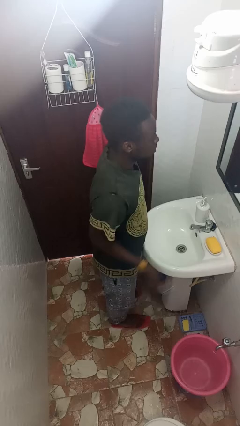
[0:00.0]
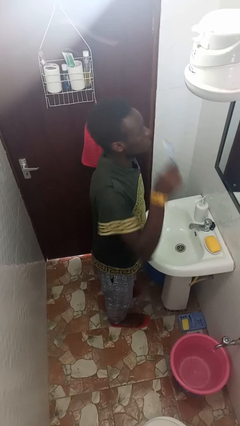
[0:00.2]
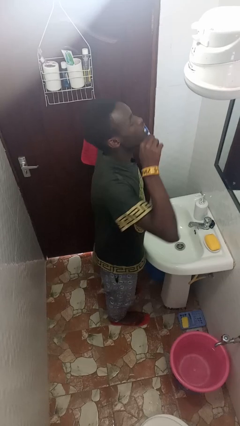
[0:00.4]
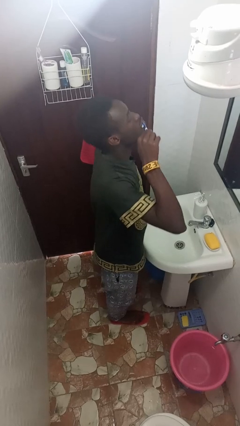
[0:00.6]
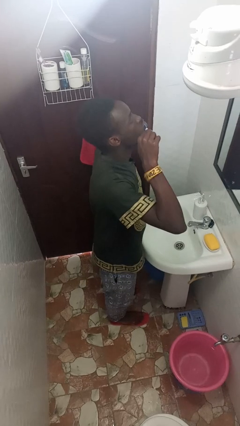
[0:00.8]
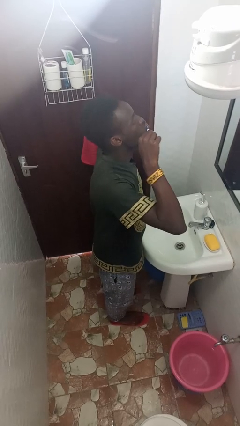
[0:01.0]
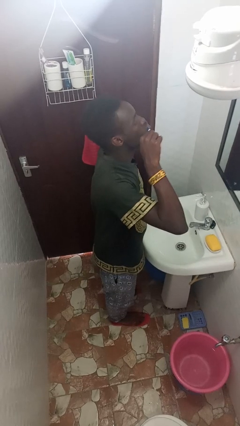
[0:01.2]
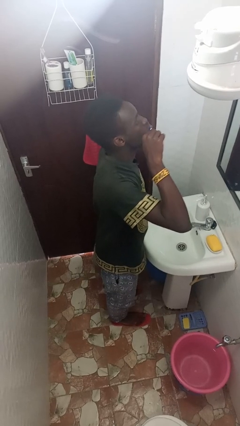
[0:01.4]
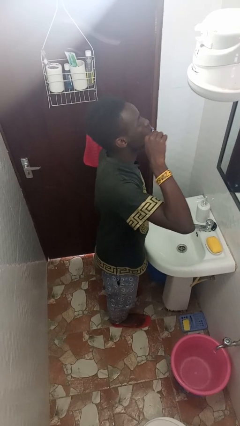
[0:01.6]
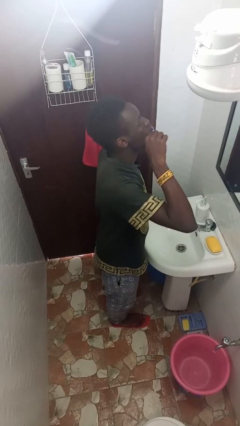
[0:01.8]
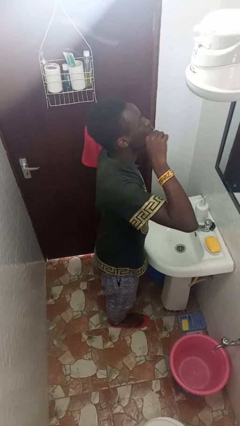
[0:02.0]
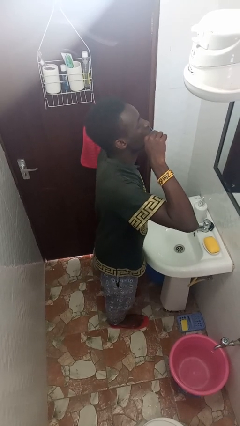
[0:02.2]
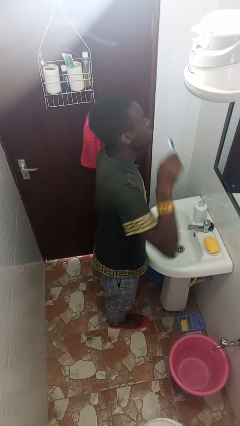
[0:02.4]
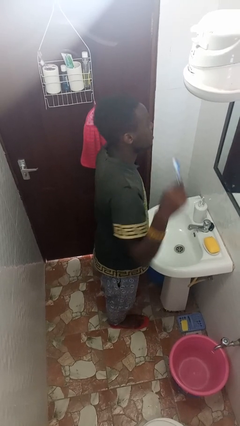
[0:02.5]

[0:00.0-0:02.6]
person brushes teeth

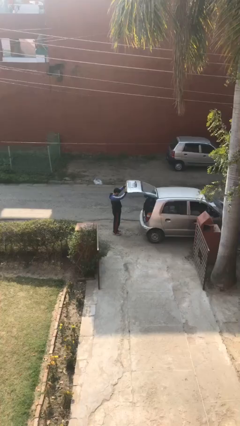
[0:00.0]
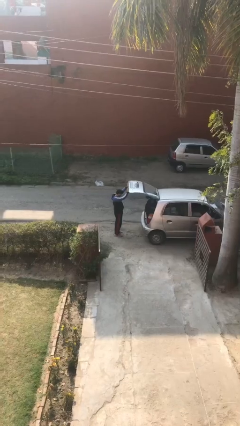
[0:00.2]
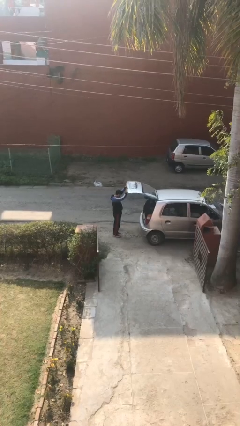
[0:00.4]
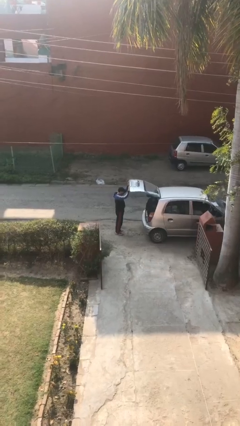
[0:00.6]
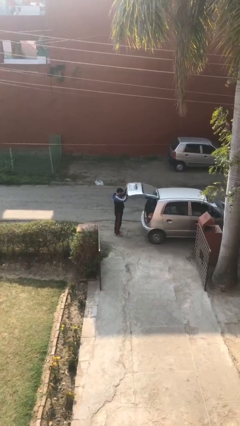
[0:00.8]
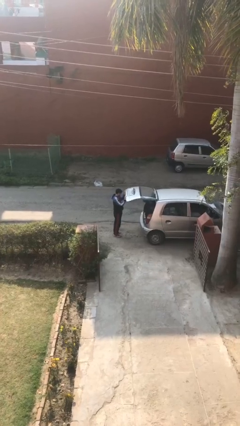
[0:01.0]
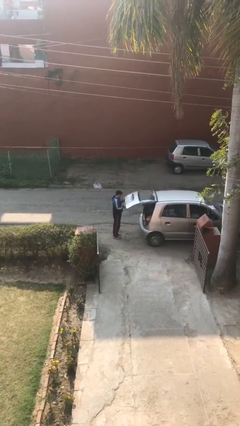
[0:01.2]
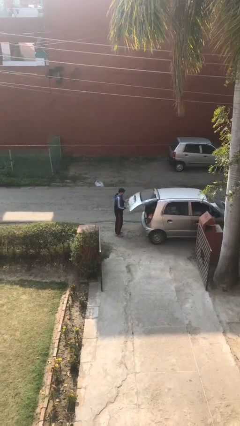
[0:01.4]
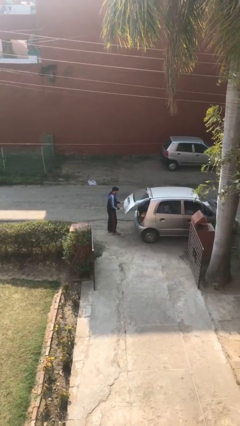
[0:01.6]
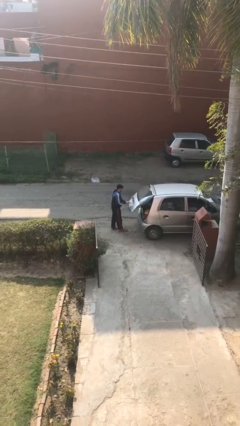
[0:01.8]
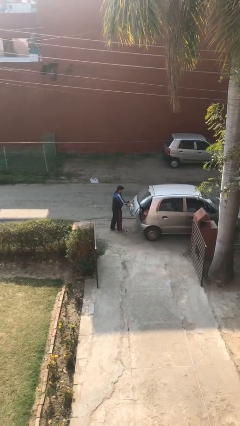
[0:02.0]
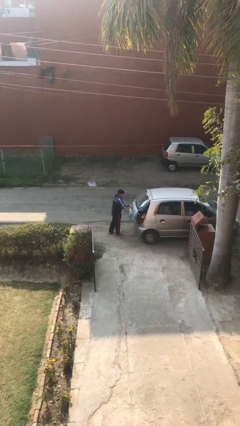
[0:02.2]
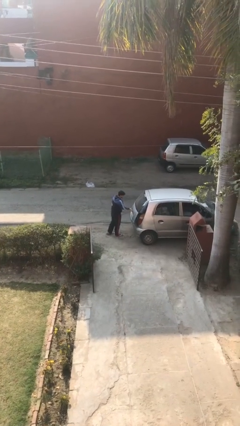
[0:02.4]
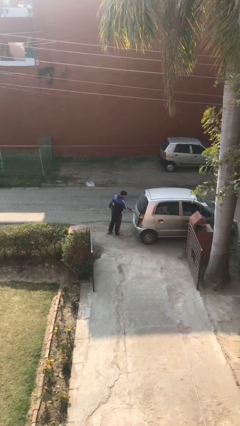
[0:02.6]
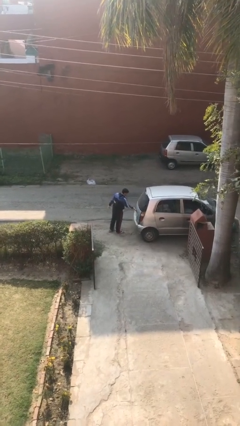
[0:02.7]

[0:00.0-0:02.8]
person closes car trunk

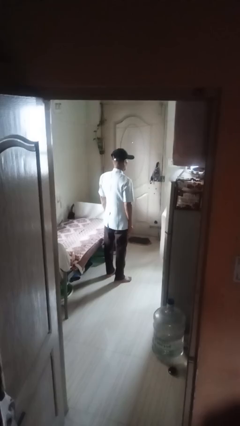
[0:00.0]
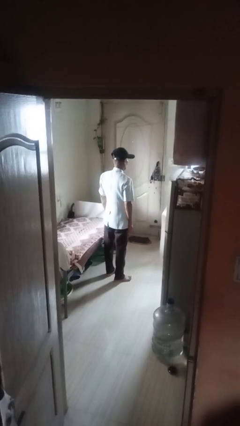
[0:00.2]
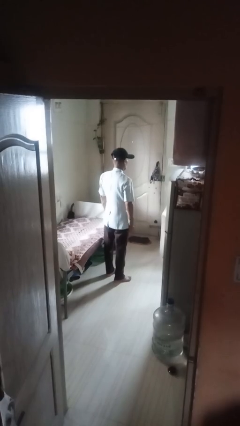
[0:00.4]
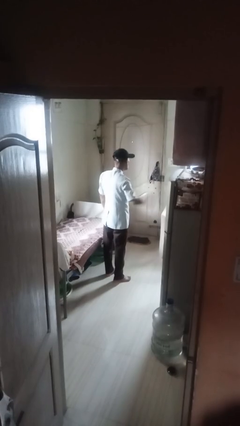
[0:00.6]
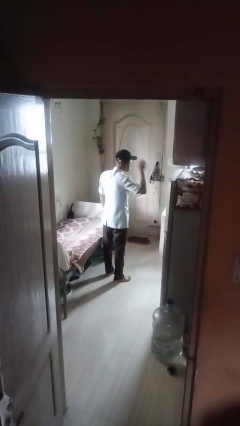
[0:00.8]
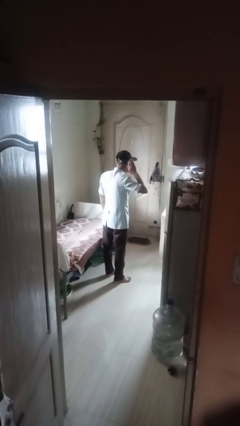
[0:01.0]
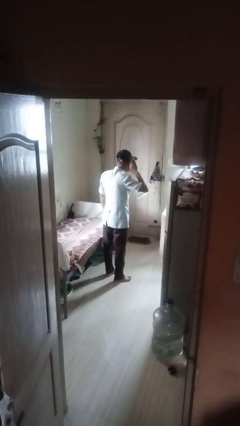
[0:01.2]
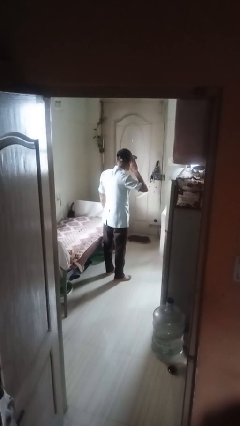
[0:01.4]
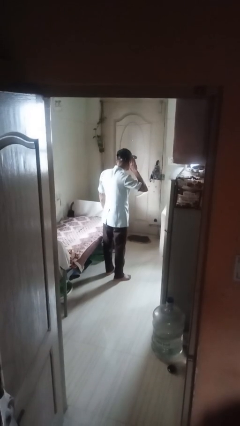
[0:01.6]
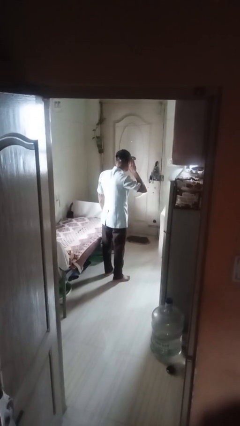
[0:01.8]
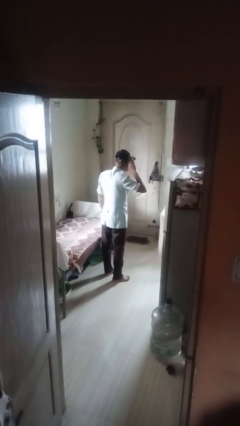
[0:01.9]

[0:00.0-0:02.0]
person gestures listen closely

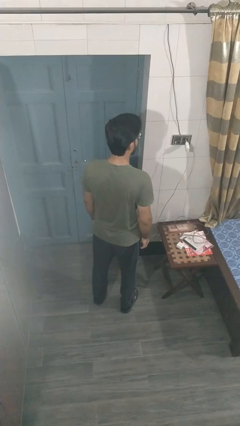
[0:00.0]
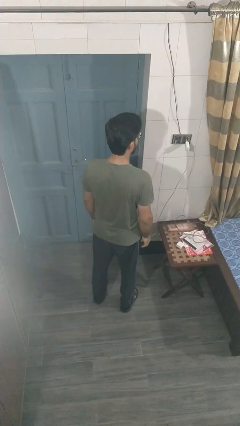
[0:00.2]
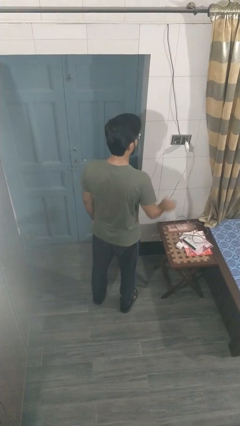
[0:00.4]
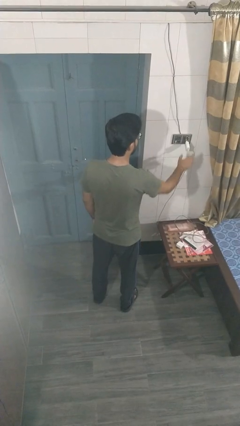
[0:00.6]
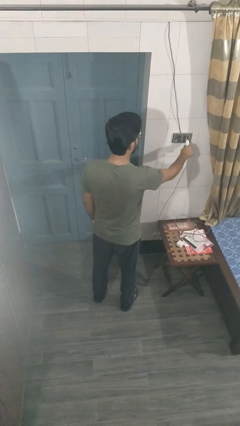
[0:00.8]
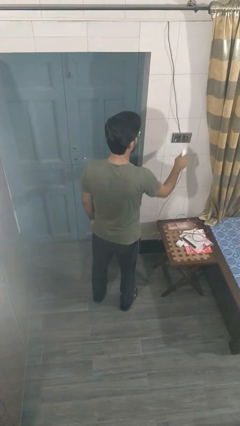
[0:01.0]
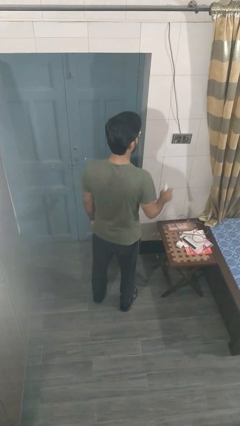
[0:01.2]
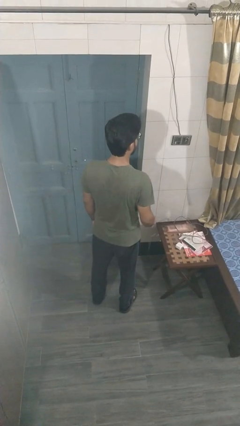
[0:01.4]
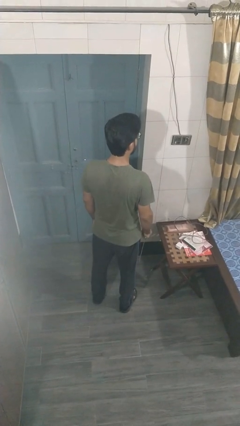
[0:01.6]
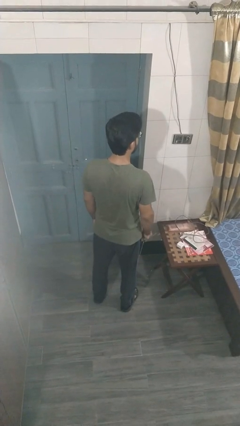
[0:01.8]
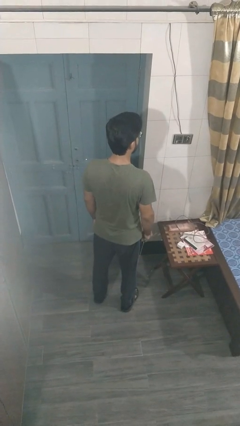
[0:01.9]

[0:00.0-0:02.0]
person unplugs from electrical socket

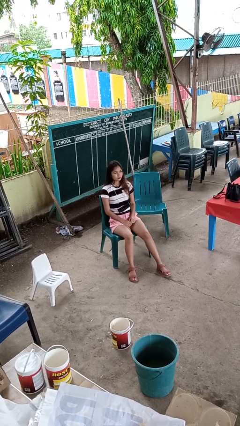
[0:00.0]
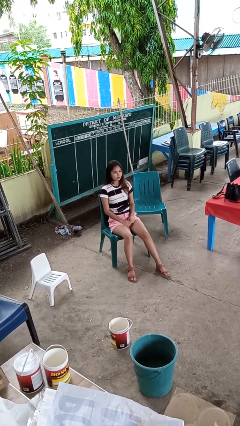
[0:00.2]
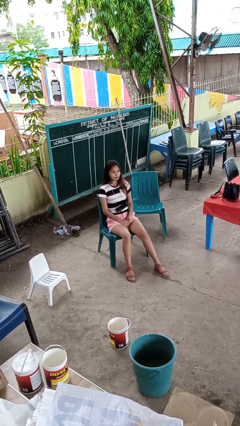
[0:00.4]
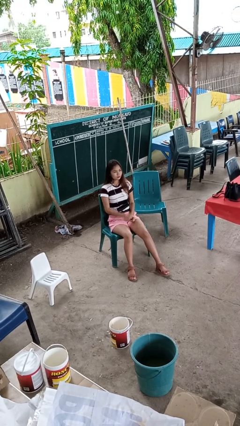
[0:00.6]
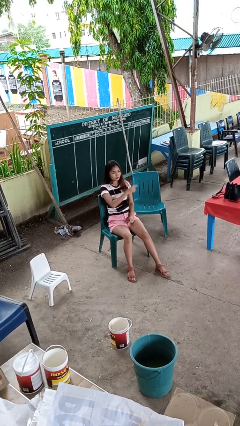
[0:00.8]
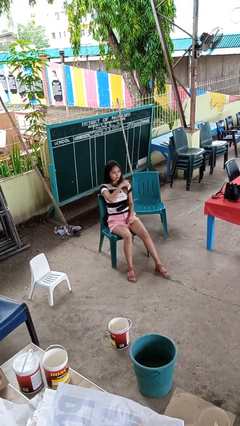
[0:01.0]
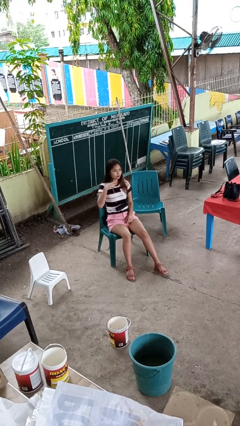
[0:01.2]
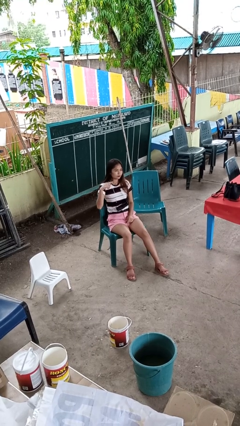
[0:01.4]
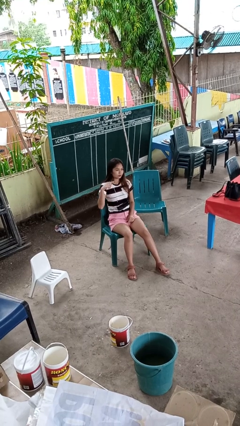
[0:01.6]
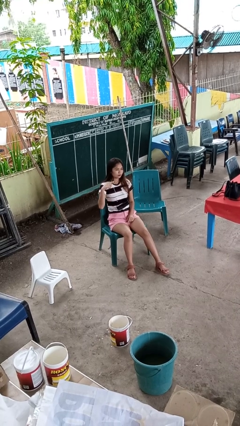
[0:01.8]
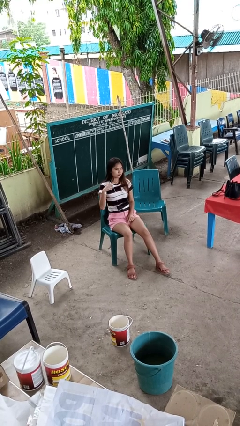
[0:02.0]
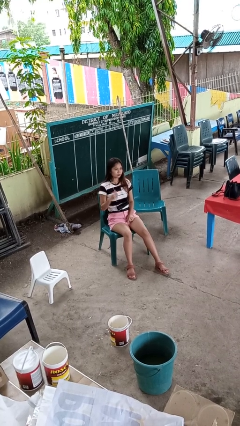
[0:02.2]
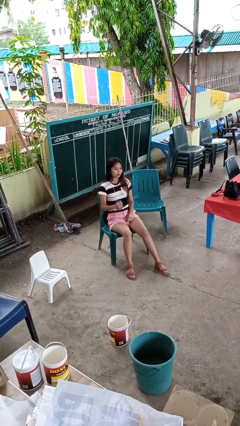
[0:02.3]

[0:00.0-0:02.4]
person gestures cut

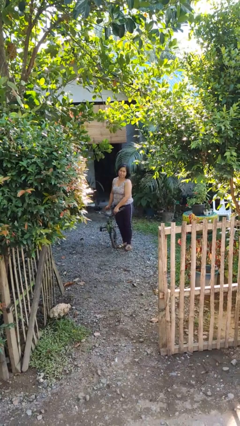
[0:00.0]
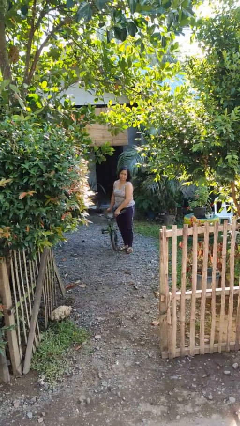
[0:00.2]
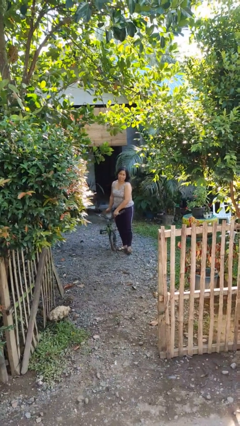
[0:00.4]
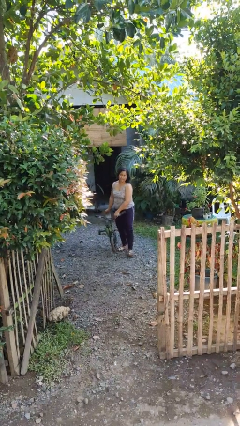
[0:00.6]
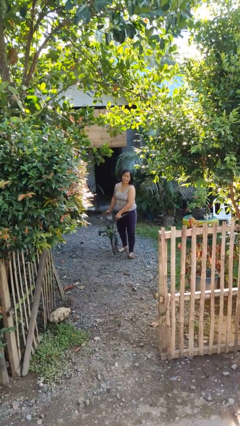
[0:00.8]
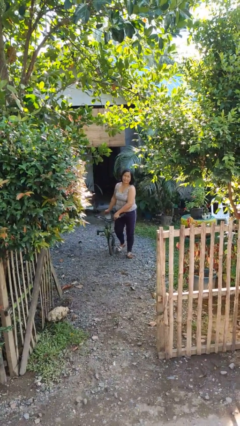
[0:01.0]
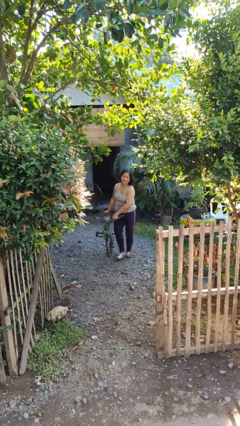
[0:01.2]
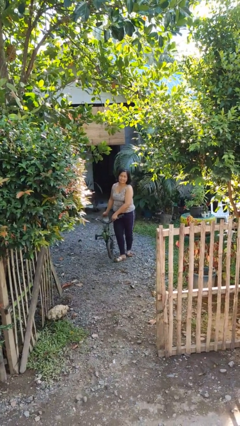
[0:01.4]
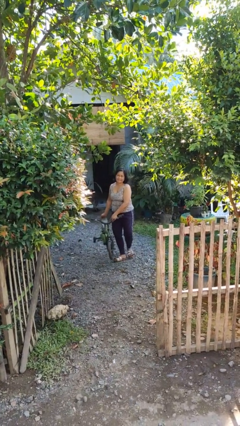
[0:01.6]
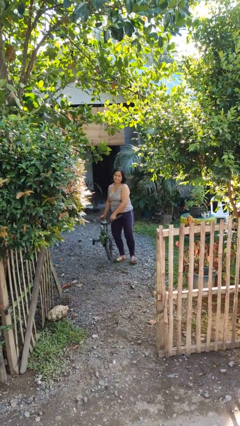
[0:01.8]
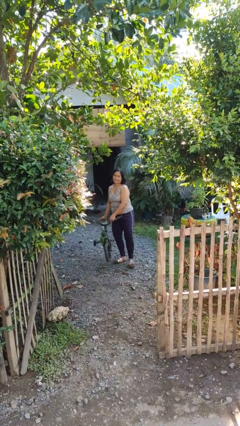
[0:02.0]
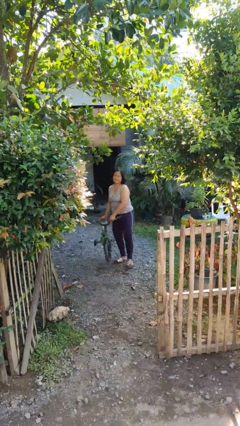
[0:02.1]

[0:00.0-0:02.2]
person carries bicycle

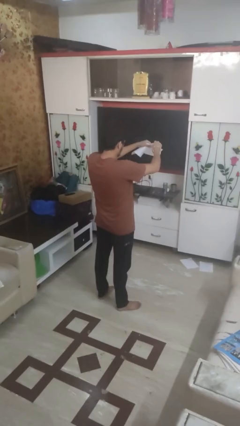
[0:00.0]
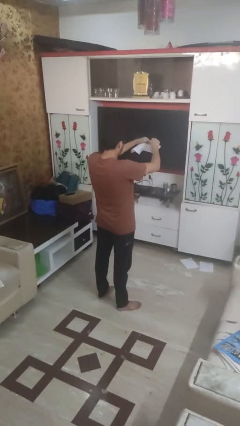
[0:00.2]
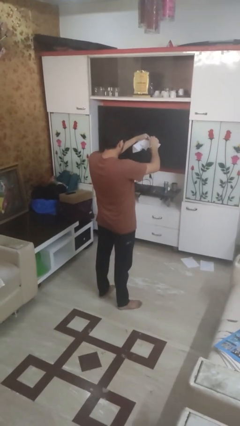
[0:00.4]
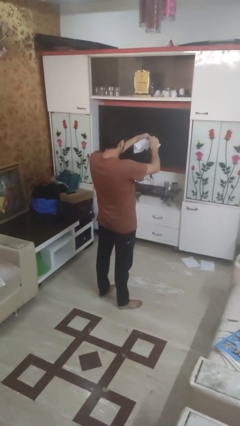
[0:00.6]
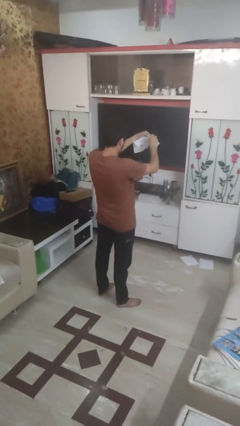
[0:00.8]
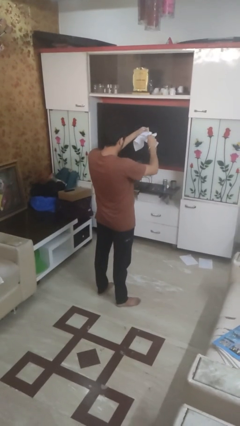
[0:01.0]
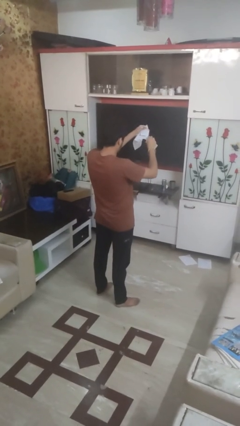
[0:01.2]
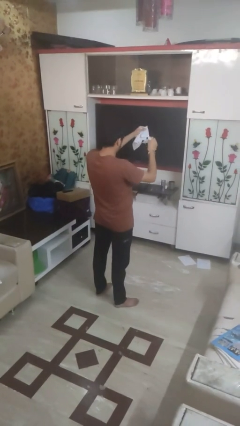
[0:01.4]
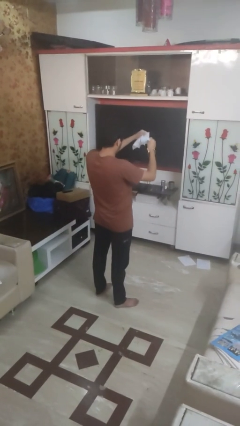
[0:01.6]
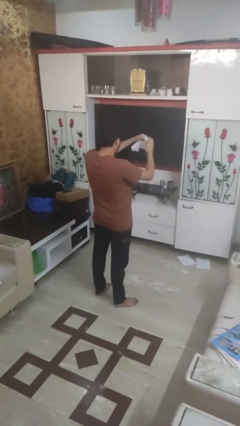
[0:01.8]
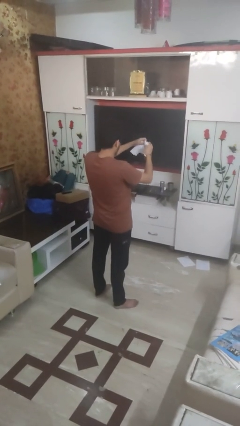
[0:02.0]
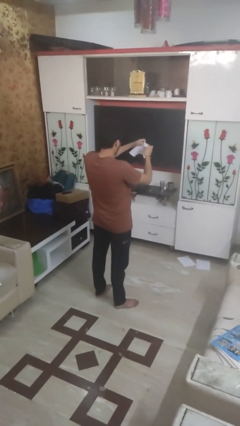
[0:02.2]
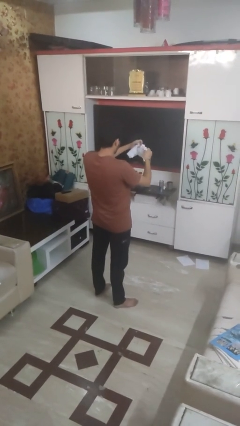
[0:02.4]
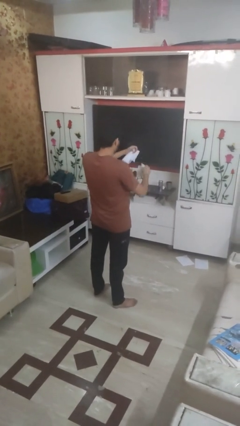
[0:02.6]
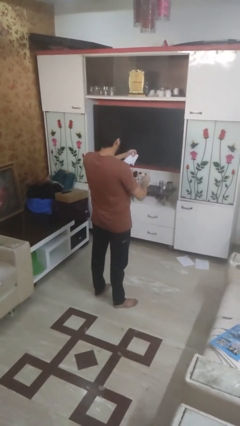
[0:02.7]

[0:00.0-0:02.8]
person tears paper

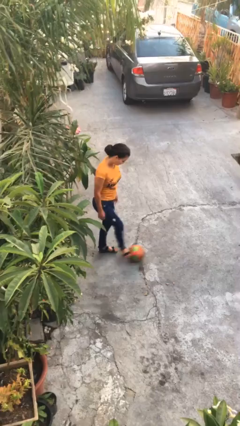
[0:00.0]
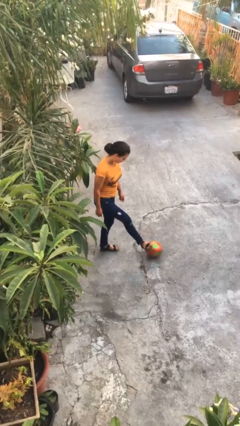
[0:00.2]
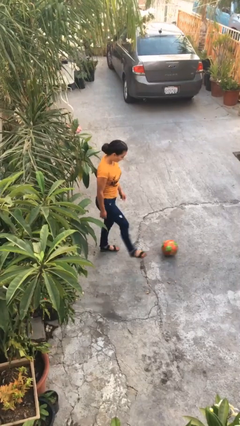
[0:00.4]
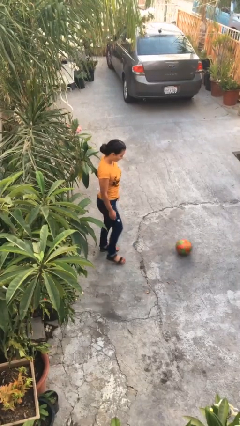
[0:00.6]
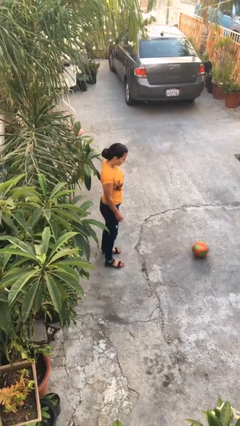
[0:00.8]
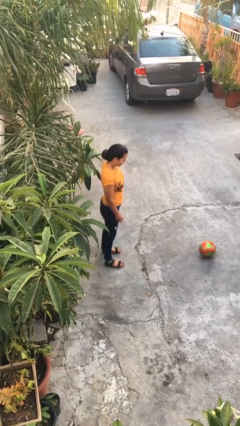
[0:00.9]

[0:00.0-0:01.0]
person kicks object to person
